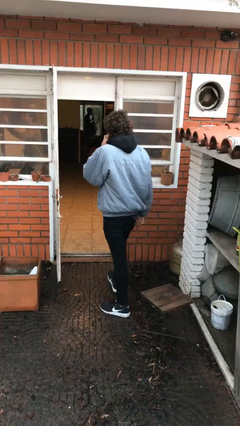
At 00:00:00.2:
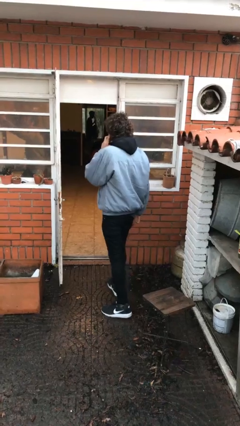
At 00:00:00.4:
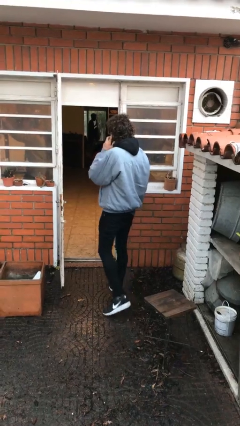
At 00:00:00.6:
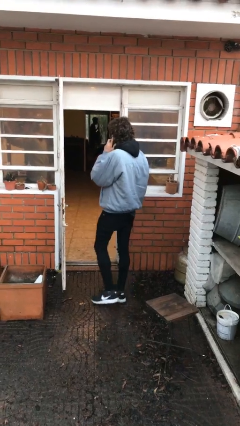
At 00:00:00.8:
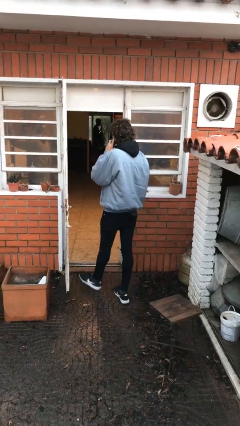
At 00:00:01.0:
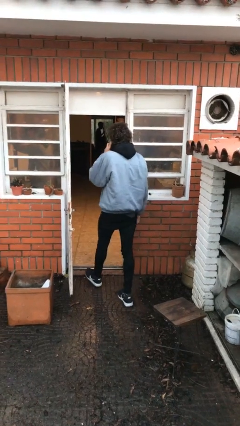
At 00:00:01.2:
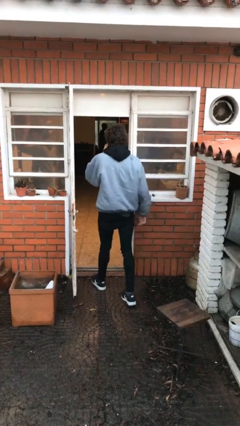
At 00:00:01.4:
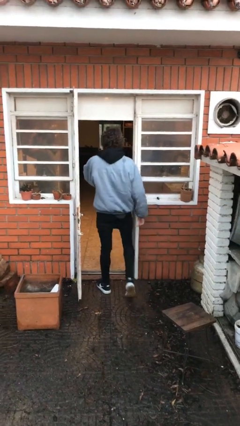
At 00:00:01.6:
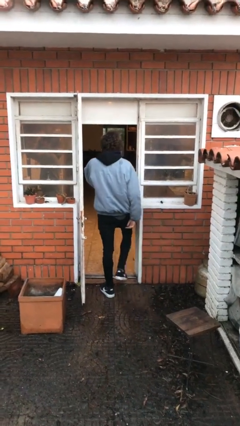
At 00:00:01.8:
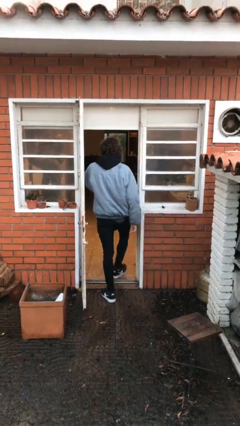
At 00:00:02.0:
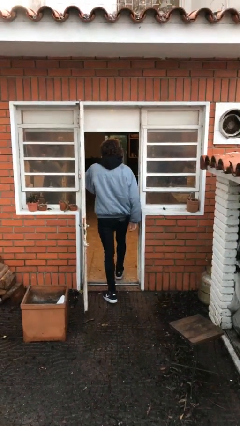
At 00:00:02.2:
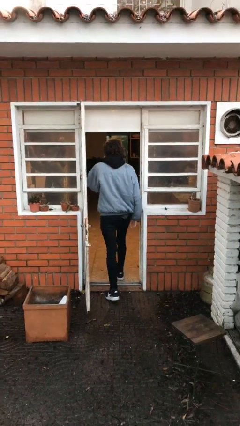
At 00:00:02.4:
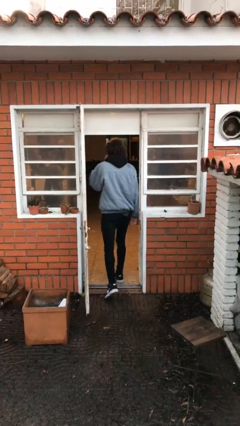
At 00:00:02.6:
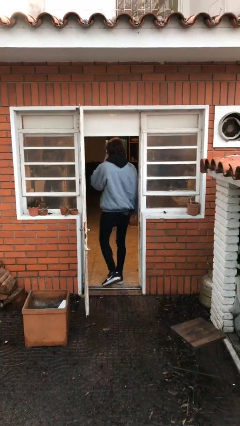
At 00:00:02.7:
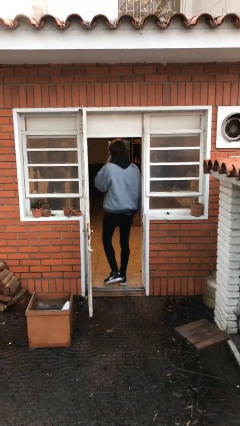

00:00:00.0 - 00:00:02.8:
person exits scene through structure

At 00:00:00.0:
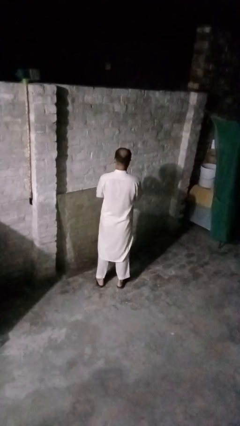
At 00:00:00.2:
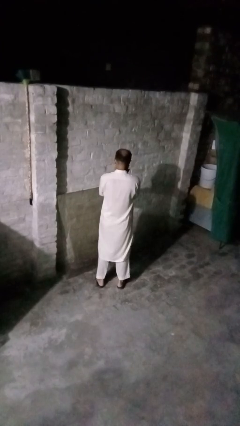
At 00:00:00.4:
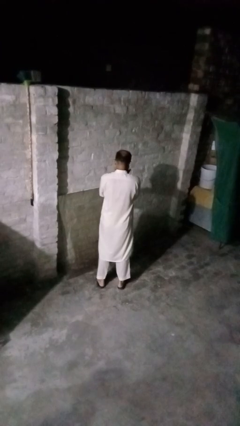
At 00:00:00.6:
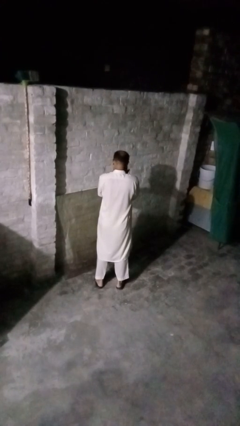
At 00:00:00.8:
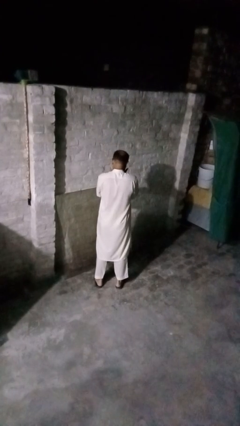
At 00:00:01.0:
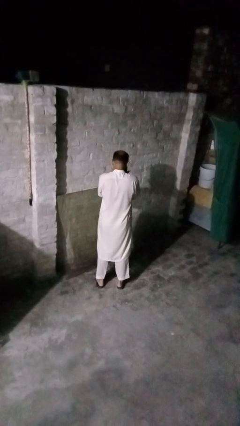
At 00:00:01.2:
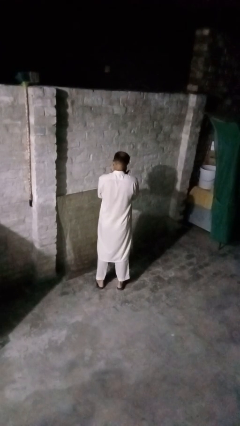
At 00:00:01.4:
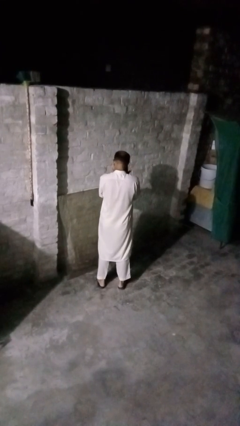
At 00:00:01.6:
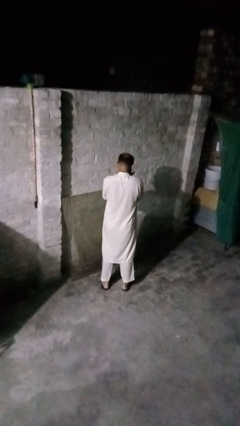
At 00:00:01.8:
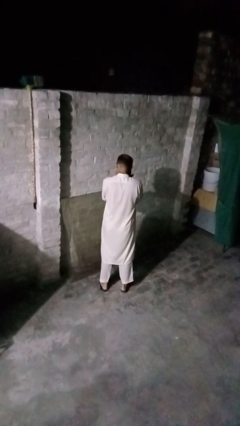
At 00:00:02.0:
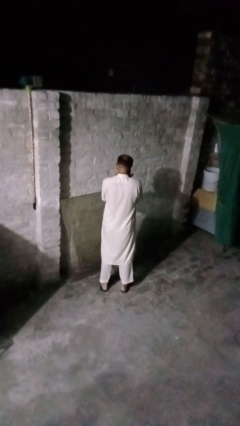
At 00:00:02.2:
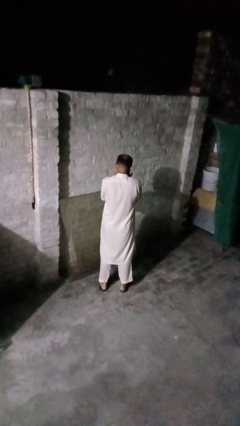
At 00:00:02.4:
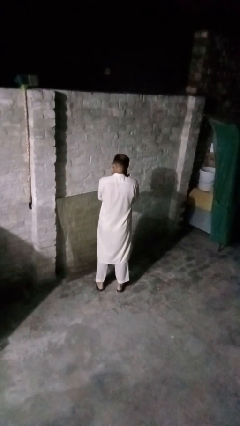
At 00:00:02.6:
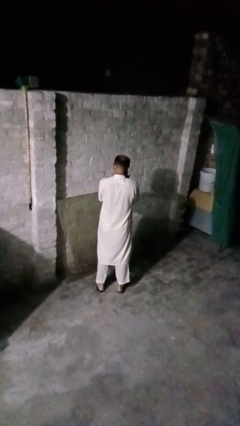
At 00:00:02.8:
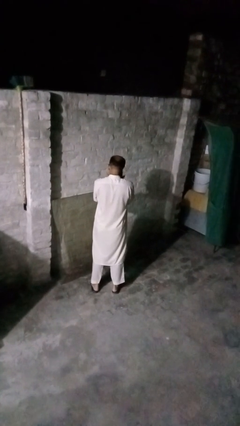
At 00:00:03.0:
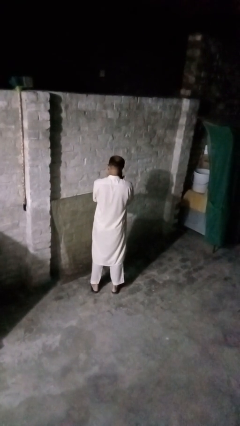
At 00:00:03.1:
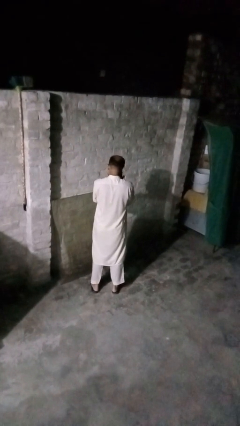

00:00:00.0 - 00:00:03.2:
person sneezes into hand

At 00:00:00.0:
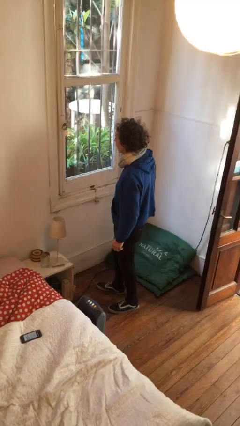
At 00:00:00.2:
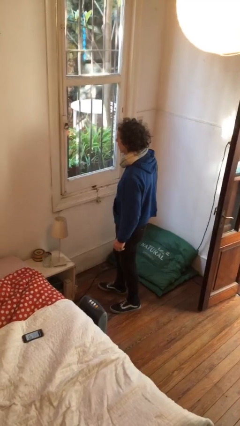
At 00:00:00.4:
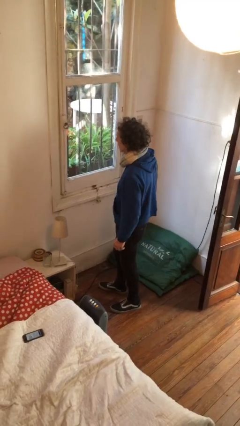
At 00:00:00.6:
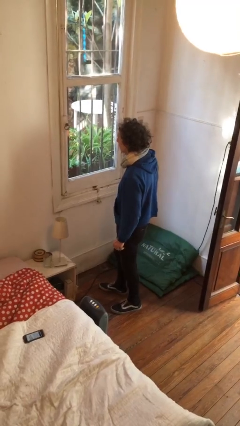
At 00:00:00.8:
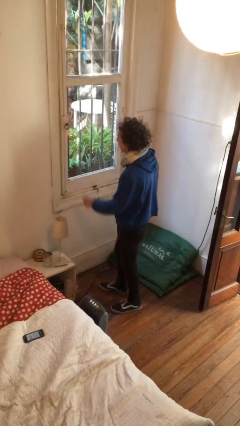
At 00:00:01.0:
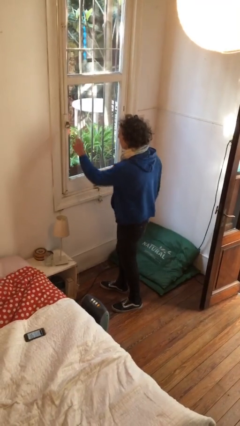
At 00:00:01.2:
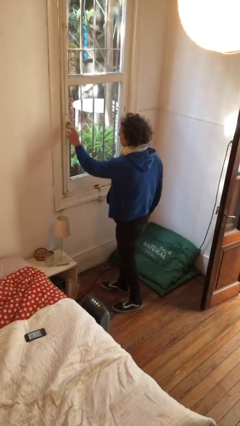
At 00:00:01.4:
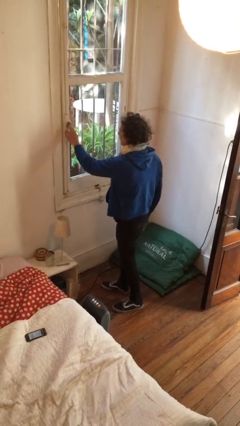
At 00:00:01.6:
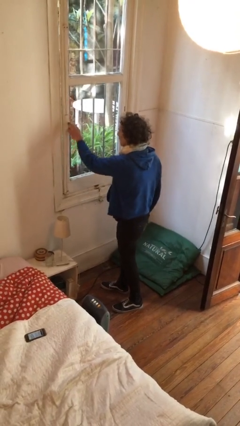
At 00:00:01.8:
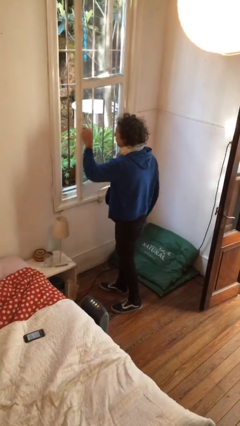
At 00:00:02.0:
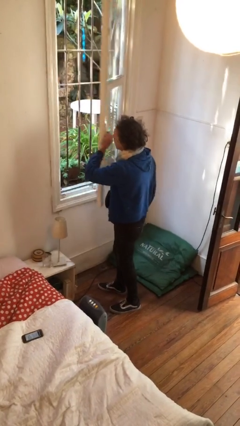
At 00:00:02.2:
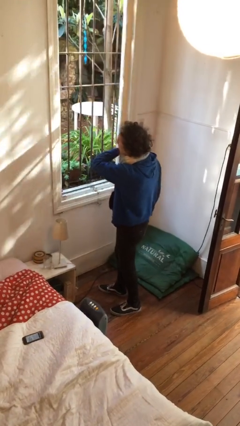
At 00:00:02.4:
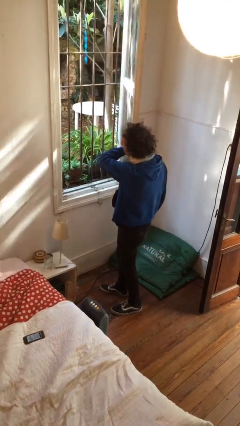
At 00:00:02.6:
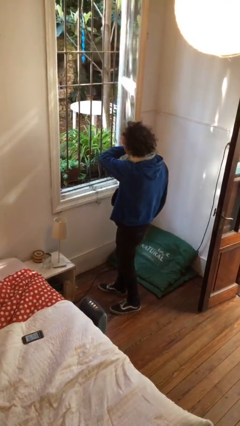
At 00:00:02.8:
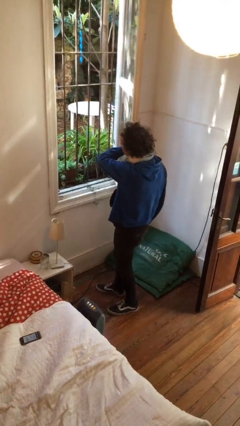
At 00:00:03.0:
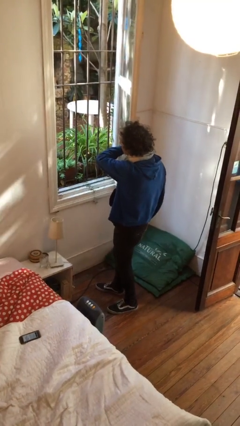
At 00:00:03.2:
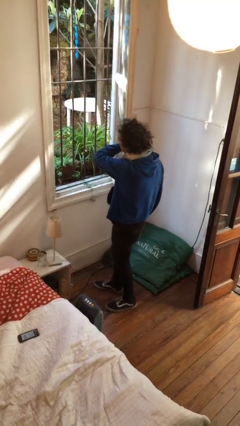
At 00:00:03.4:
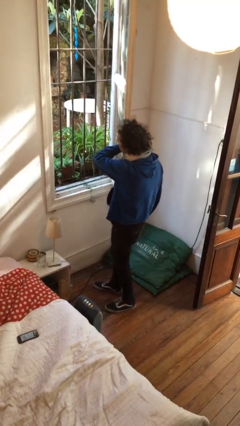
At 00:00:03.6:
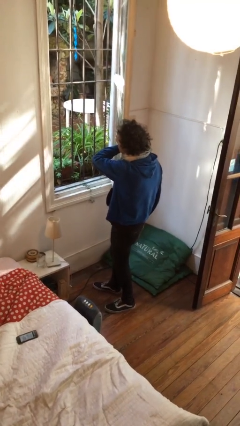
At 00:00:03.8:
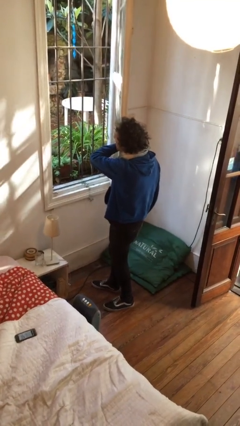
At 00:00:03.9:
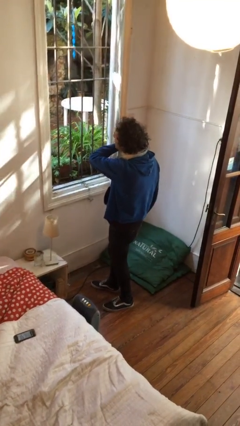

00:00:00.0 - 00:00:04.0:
person opens home window

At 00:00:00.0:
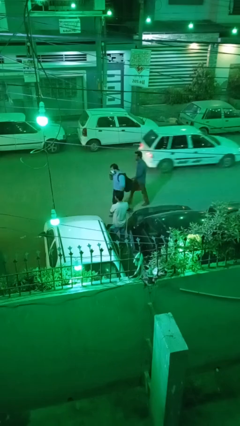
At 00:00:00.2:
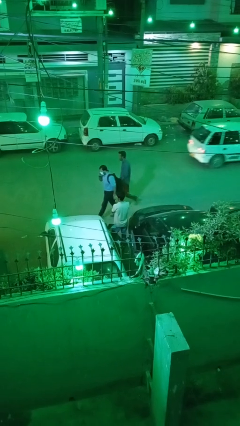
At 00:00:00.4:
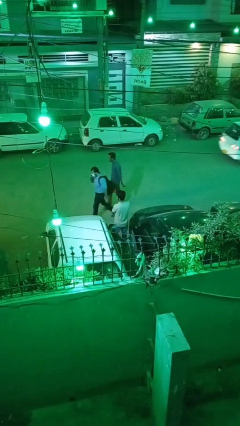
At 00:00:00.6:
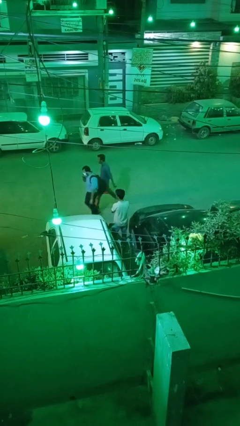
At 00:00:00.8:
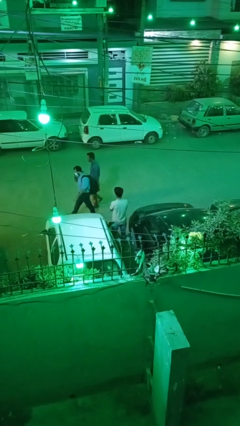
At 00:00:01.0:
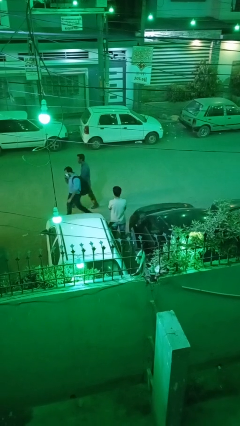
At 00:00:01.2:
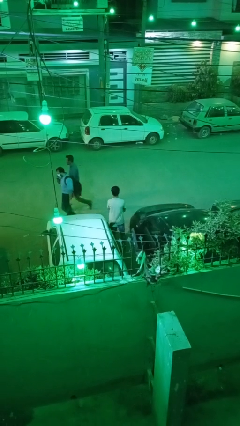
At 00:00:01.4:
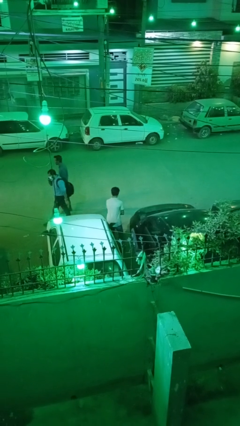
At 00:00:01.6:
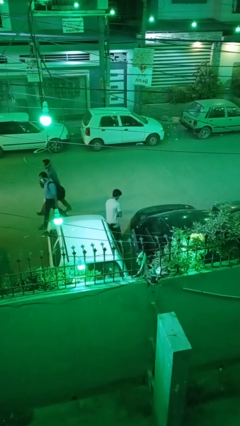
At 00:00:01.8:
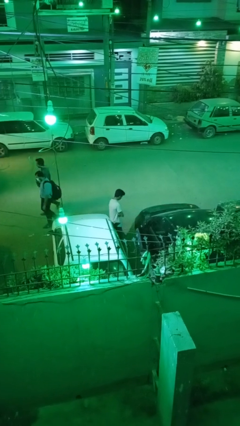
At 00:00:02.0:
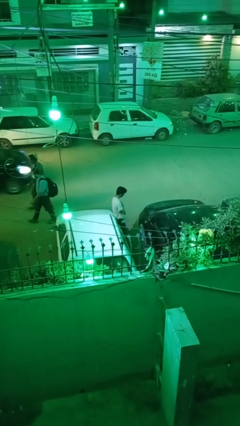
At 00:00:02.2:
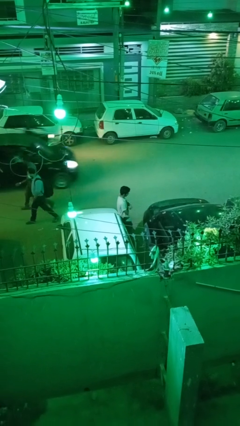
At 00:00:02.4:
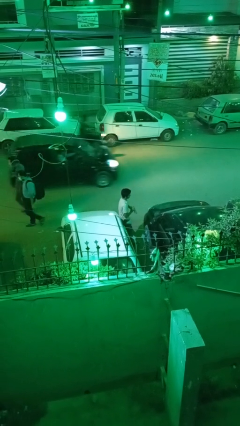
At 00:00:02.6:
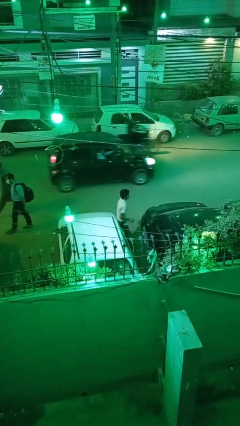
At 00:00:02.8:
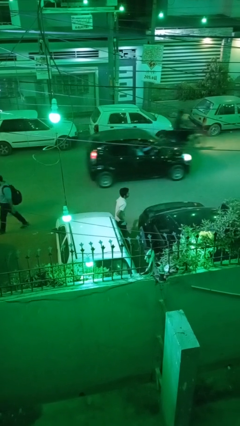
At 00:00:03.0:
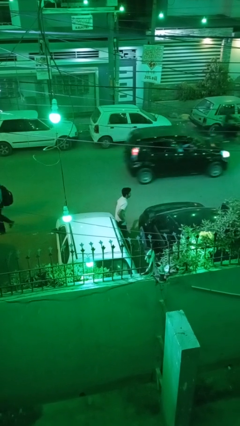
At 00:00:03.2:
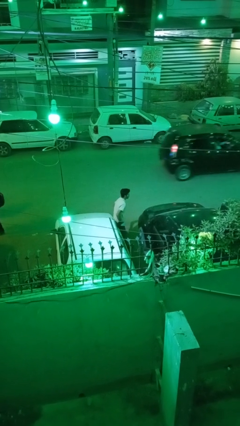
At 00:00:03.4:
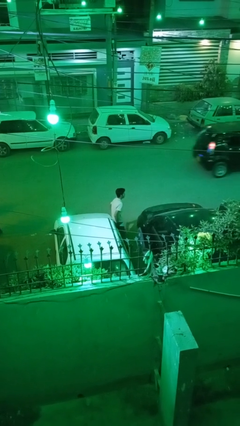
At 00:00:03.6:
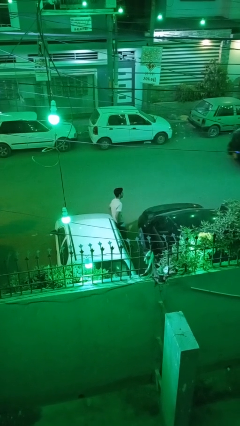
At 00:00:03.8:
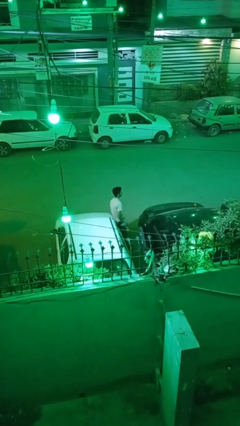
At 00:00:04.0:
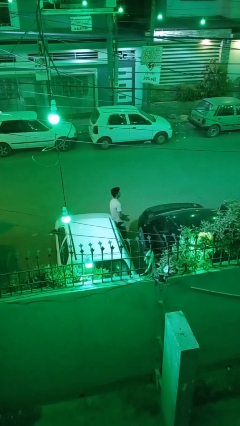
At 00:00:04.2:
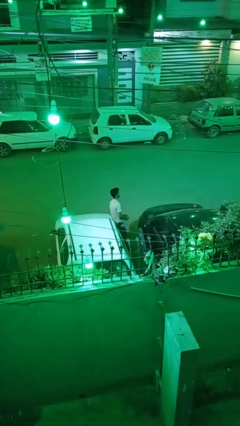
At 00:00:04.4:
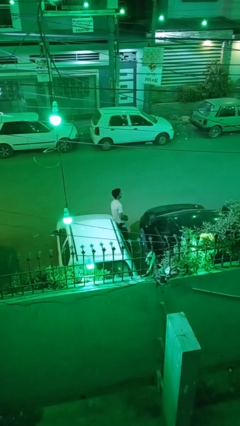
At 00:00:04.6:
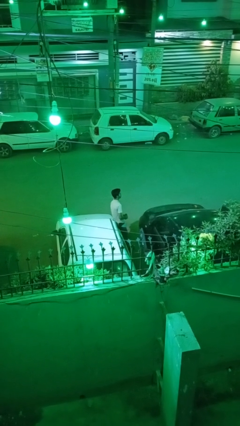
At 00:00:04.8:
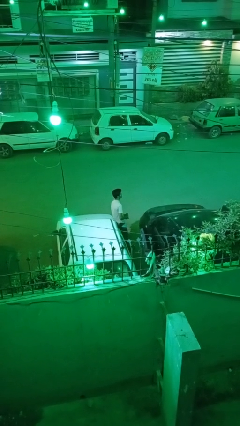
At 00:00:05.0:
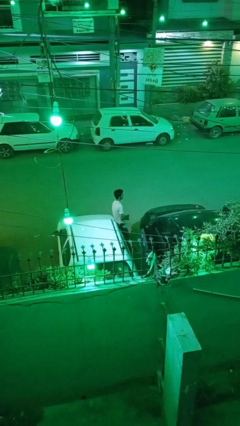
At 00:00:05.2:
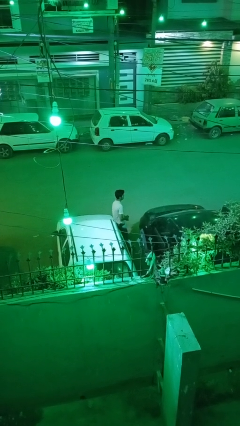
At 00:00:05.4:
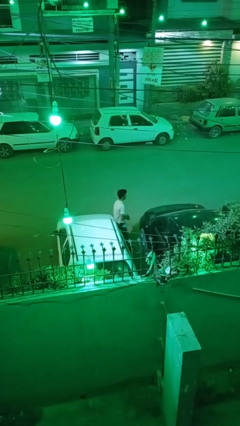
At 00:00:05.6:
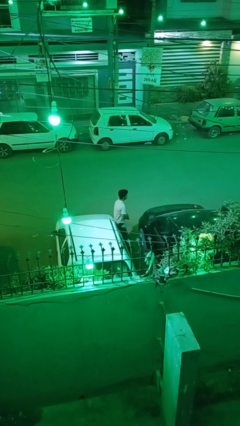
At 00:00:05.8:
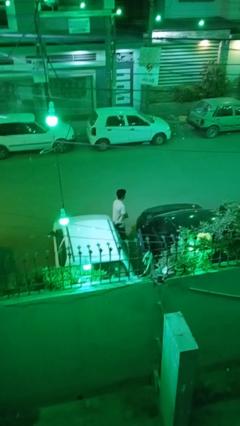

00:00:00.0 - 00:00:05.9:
person leans against car

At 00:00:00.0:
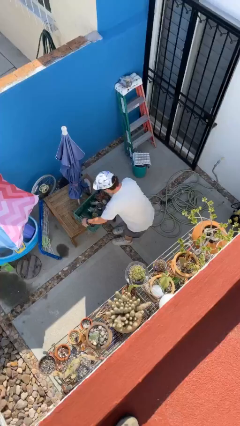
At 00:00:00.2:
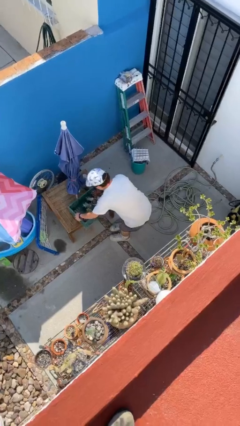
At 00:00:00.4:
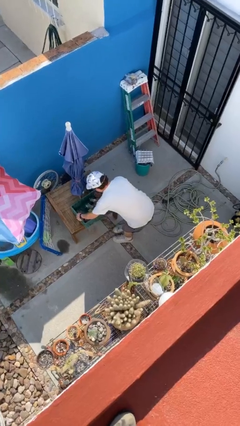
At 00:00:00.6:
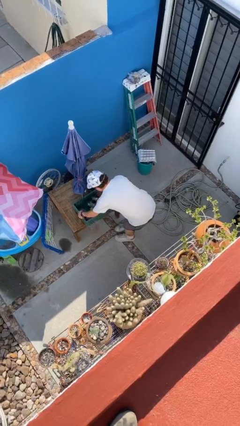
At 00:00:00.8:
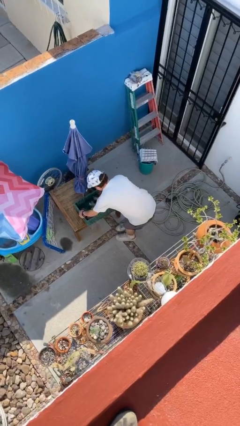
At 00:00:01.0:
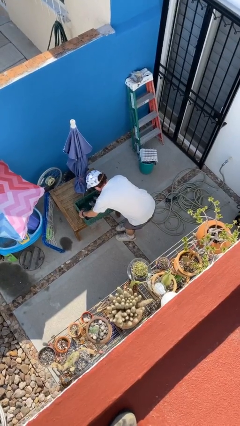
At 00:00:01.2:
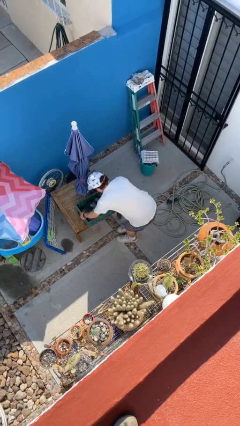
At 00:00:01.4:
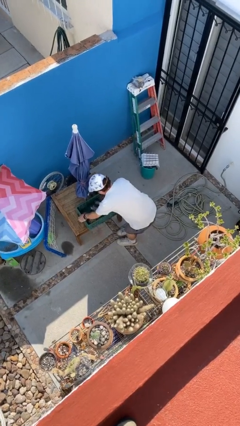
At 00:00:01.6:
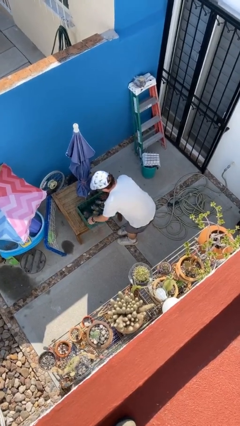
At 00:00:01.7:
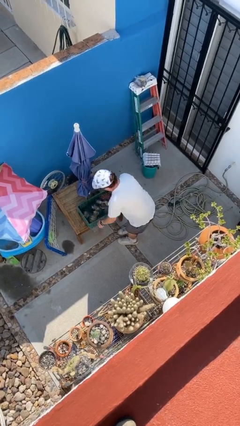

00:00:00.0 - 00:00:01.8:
person puts down object on table
